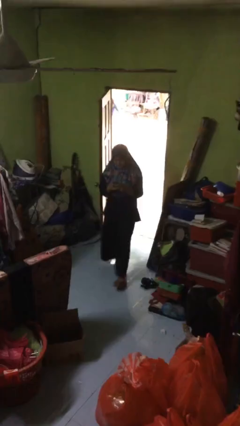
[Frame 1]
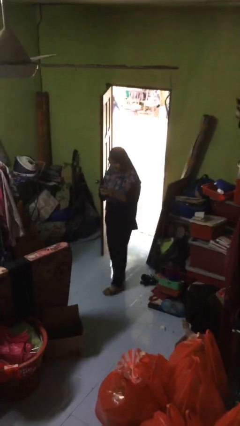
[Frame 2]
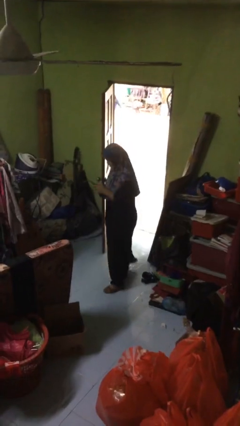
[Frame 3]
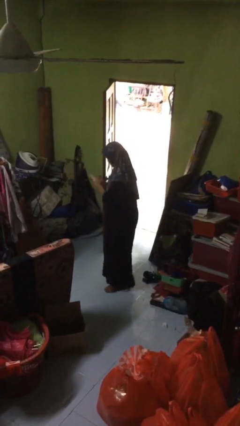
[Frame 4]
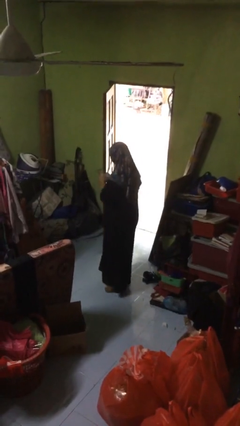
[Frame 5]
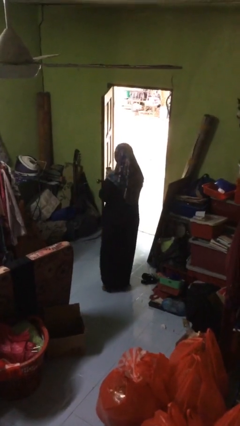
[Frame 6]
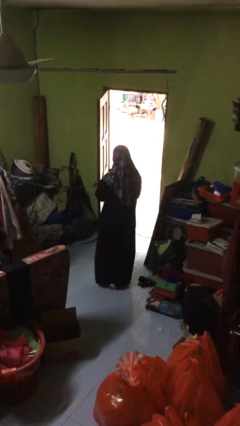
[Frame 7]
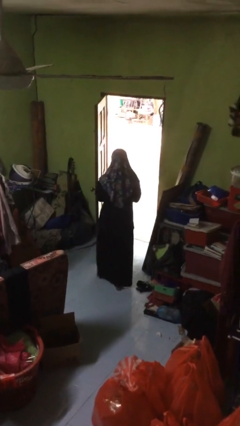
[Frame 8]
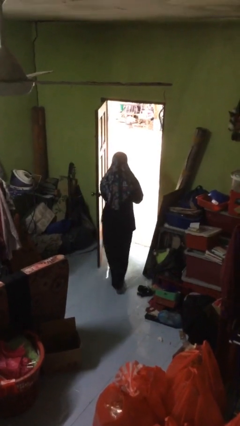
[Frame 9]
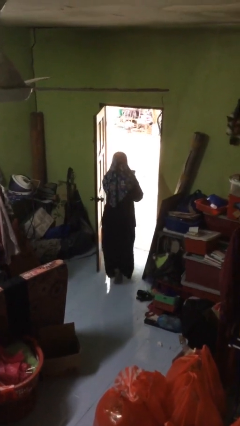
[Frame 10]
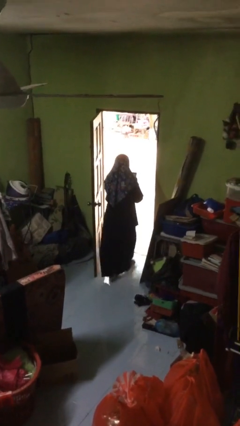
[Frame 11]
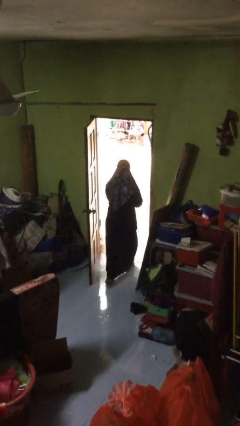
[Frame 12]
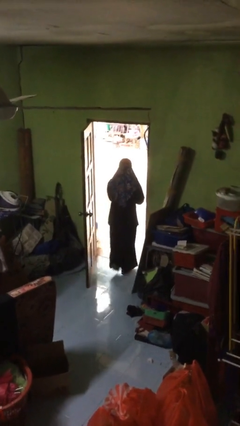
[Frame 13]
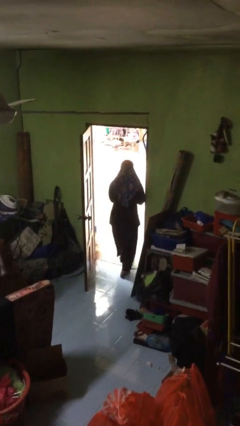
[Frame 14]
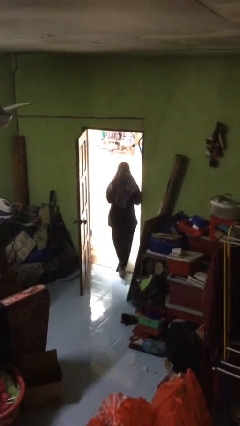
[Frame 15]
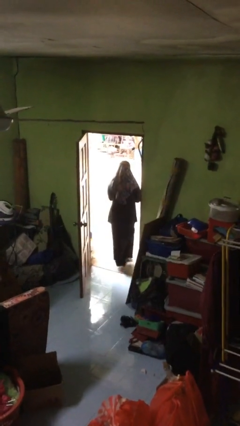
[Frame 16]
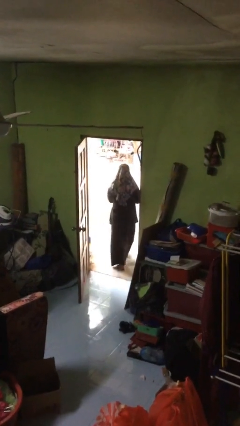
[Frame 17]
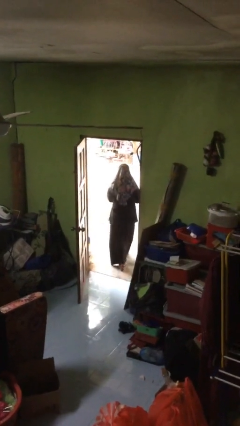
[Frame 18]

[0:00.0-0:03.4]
person exits scene through structure

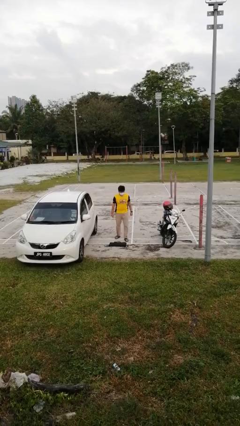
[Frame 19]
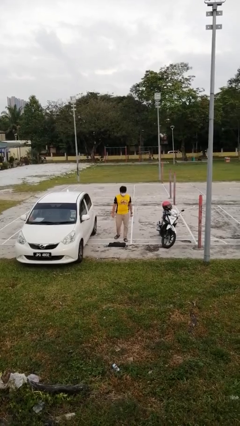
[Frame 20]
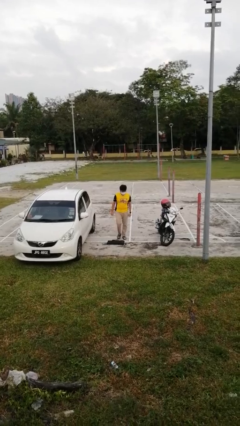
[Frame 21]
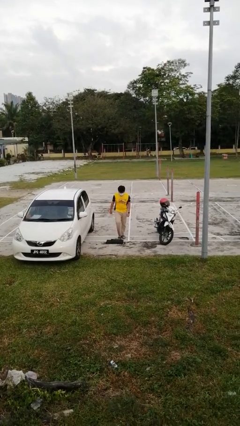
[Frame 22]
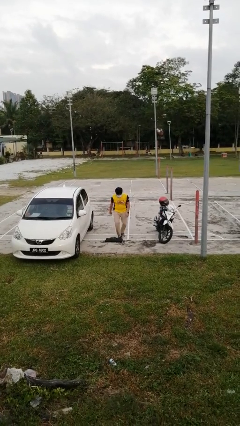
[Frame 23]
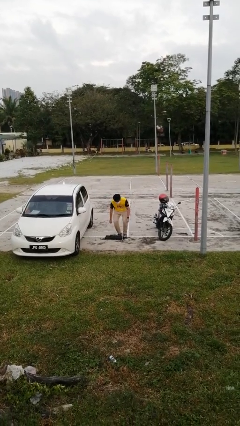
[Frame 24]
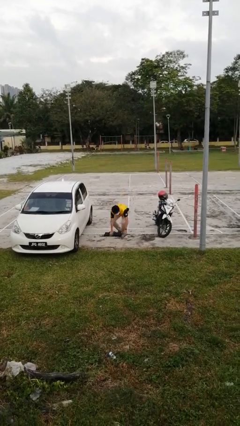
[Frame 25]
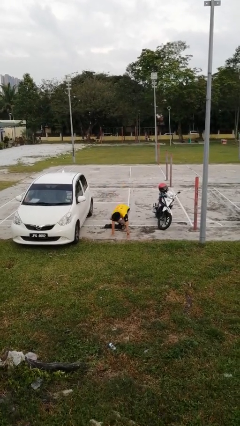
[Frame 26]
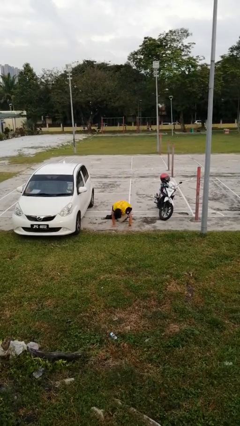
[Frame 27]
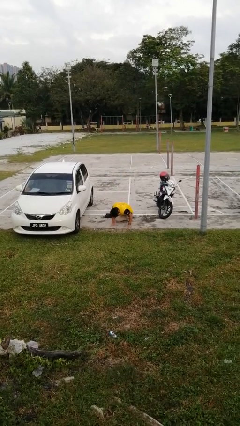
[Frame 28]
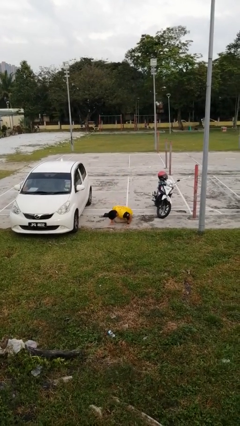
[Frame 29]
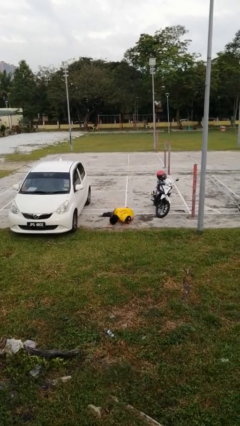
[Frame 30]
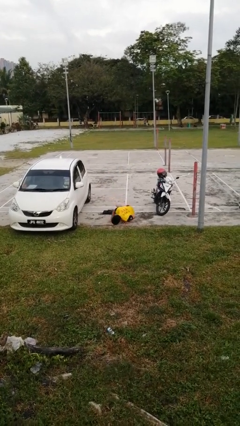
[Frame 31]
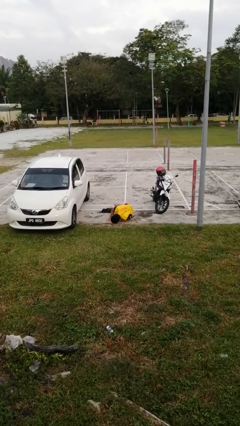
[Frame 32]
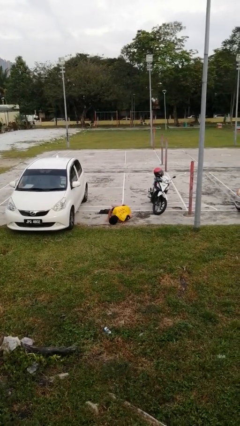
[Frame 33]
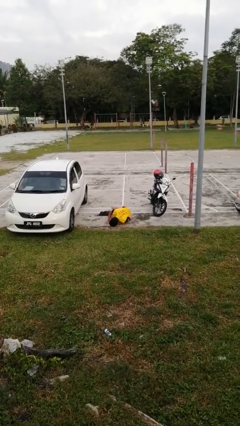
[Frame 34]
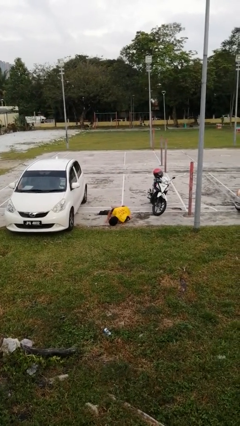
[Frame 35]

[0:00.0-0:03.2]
person trips on object on floor

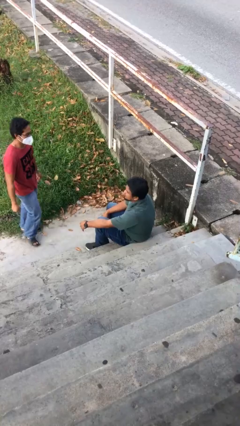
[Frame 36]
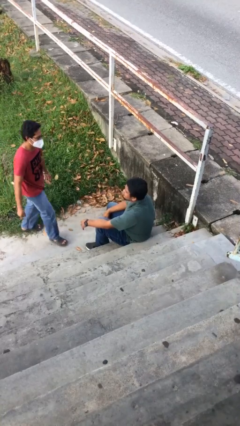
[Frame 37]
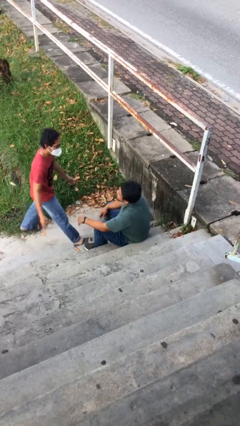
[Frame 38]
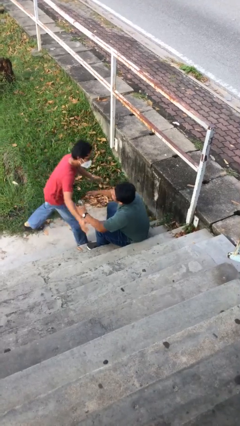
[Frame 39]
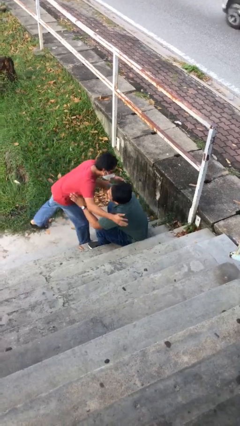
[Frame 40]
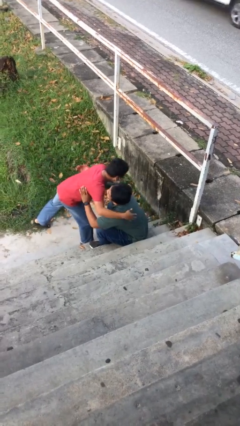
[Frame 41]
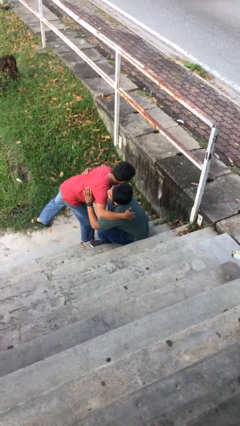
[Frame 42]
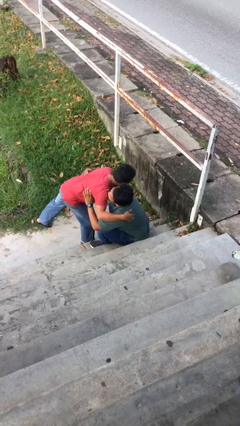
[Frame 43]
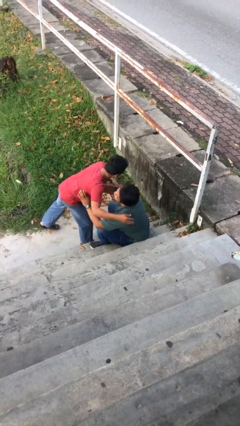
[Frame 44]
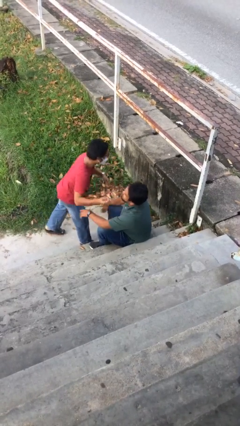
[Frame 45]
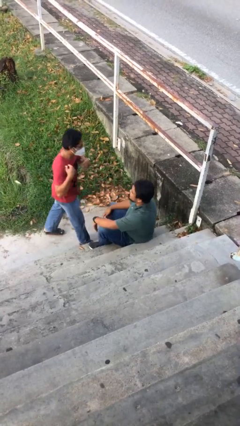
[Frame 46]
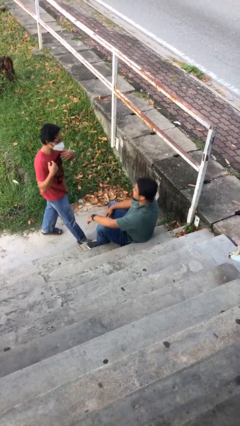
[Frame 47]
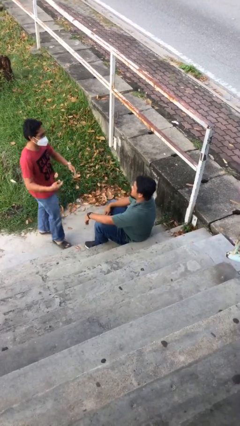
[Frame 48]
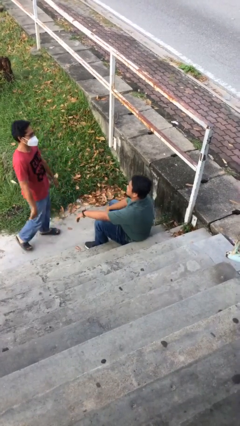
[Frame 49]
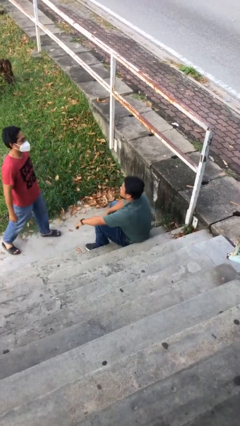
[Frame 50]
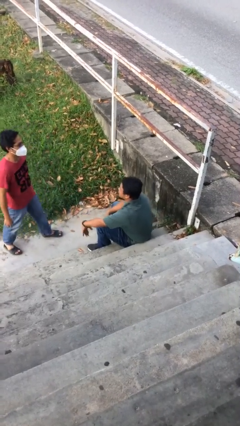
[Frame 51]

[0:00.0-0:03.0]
person embraces person

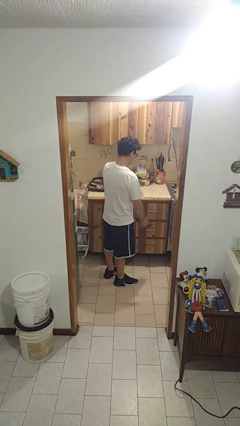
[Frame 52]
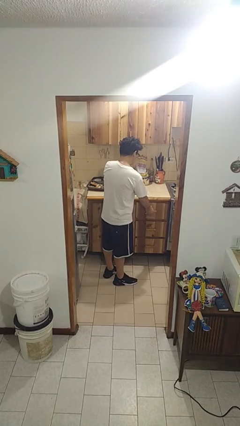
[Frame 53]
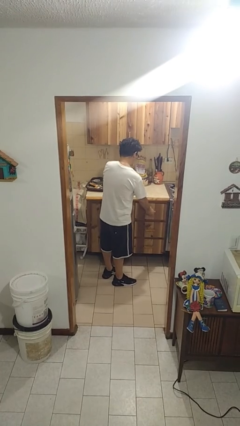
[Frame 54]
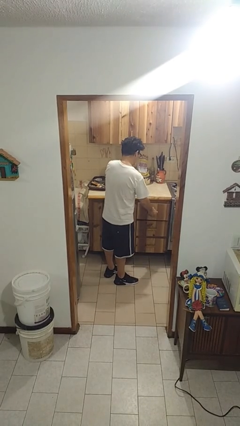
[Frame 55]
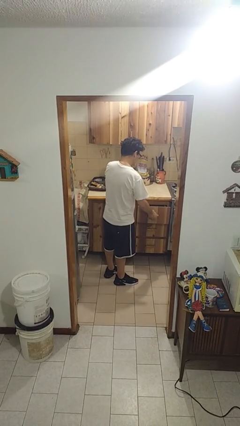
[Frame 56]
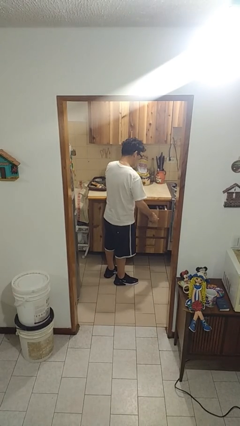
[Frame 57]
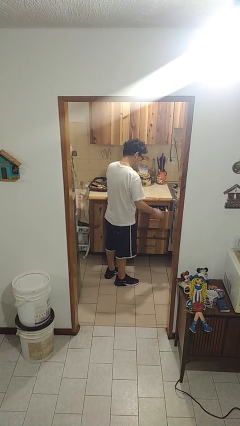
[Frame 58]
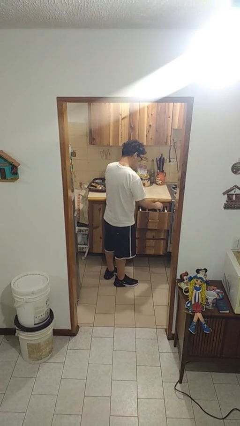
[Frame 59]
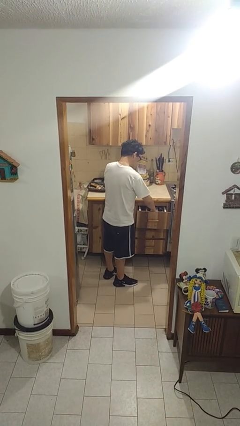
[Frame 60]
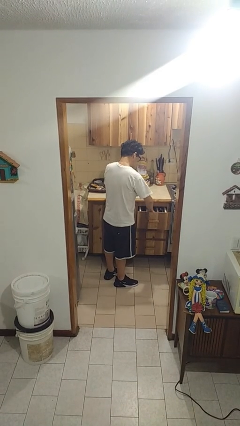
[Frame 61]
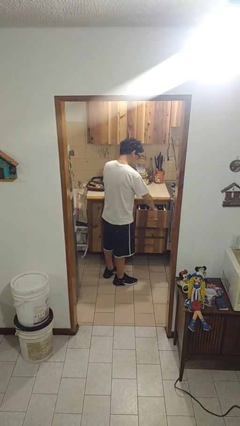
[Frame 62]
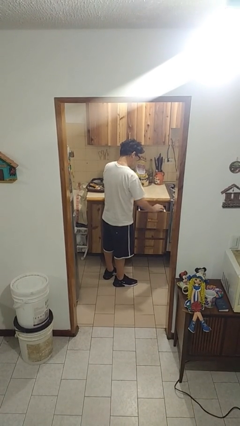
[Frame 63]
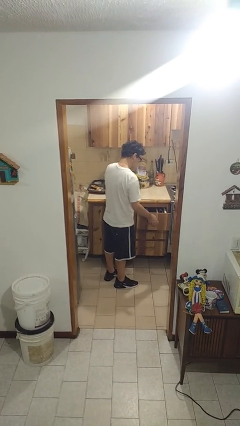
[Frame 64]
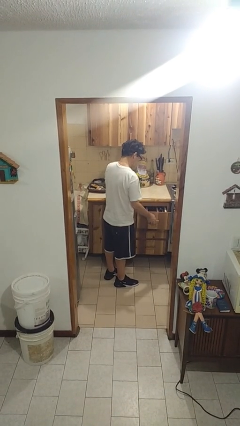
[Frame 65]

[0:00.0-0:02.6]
person searches in kitchen drawer

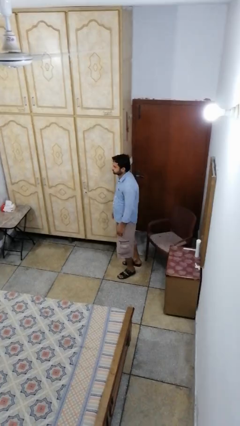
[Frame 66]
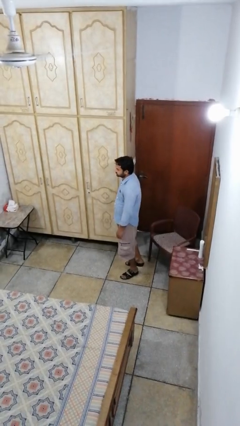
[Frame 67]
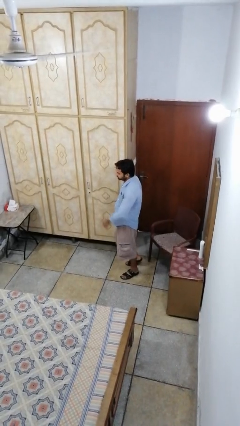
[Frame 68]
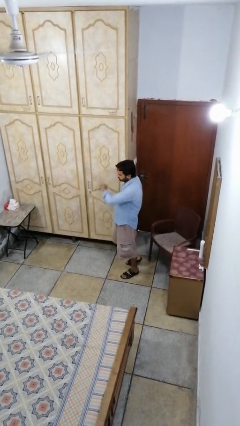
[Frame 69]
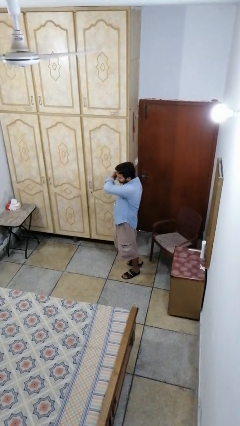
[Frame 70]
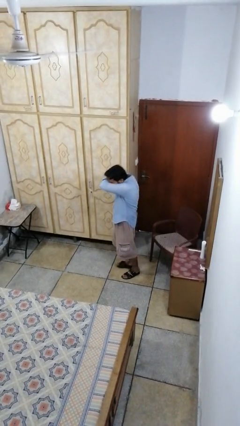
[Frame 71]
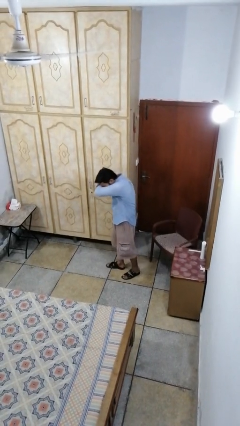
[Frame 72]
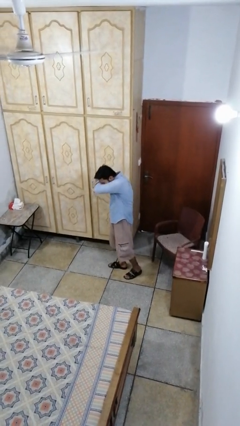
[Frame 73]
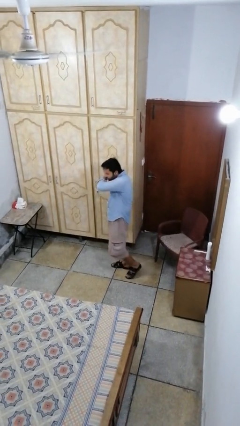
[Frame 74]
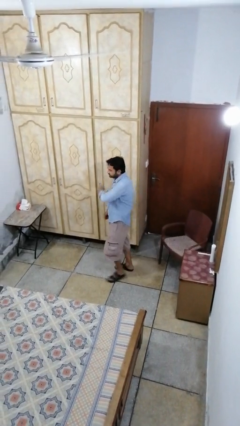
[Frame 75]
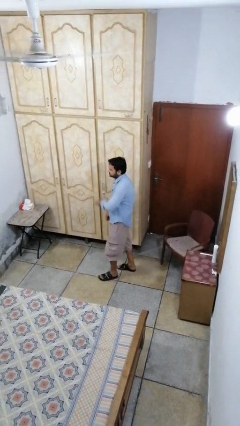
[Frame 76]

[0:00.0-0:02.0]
person sneezes into arm

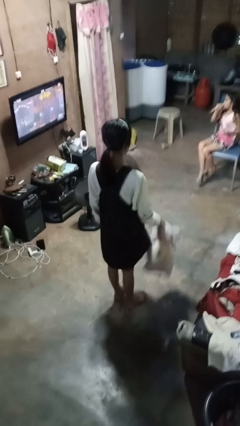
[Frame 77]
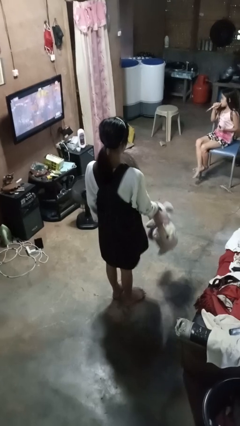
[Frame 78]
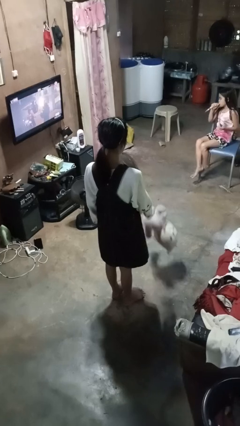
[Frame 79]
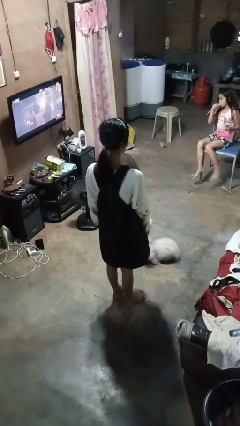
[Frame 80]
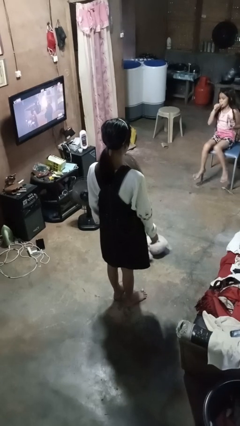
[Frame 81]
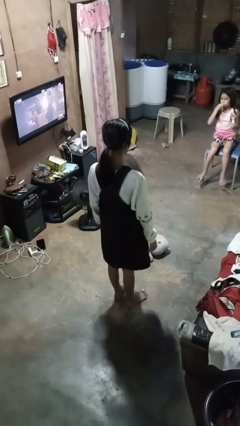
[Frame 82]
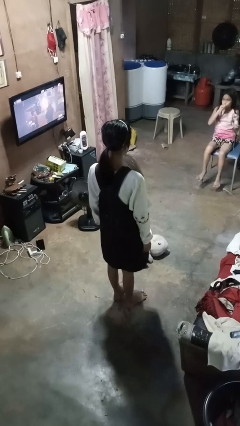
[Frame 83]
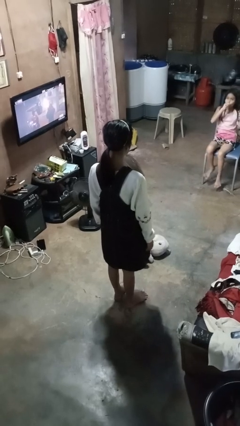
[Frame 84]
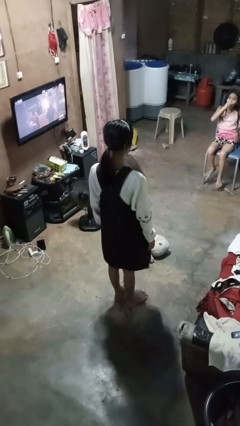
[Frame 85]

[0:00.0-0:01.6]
person throws object to ground

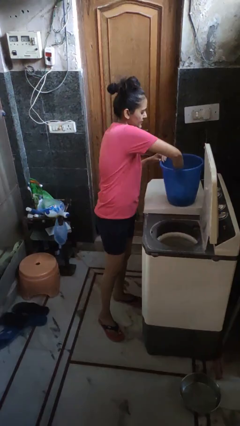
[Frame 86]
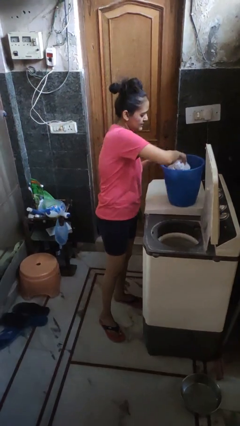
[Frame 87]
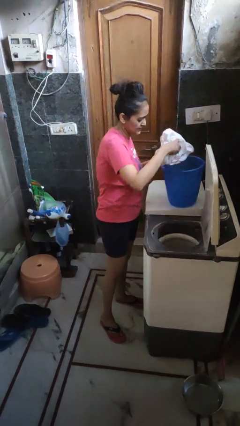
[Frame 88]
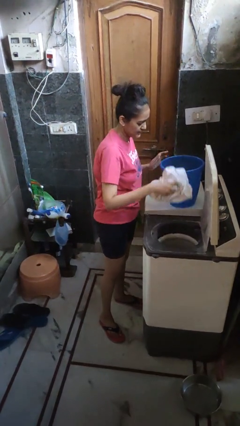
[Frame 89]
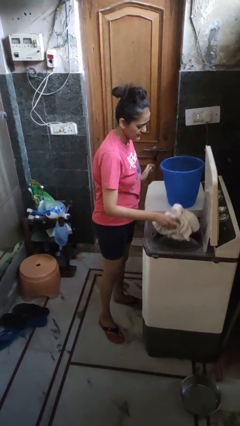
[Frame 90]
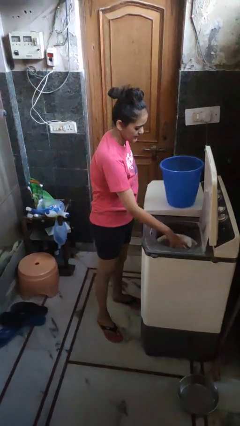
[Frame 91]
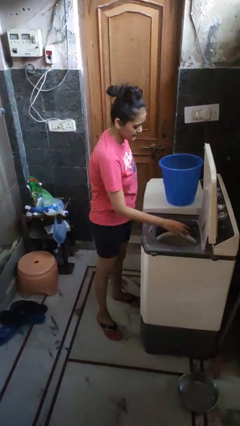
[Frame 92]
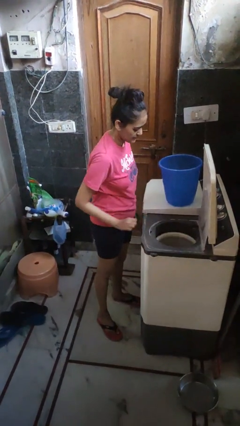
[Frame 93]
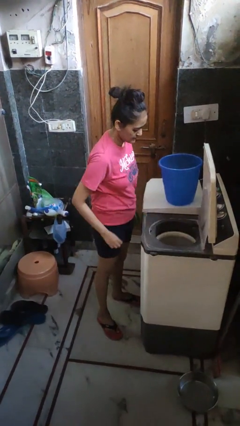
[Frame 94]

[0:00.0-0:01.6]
person puts clothes into dresser
